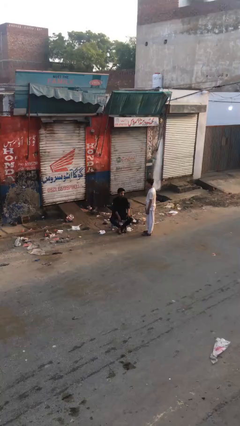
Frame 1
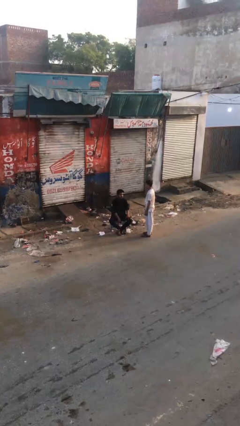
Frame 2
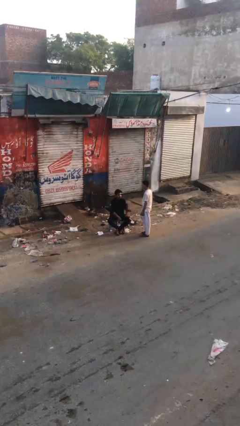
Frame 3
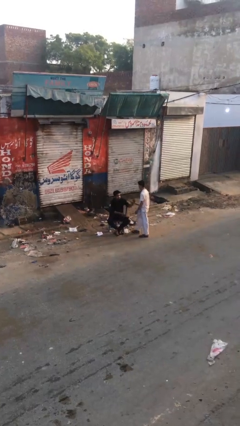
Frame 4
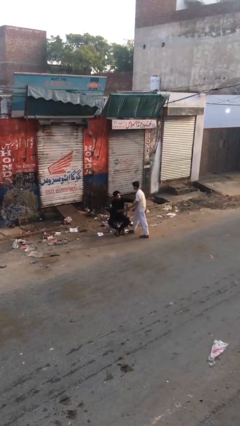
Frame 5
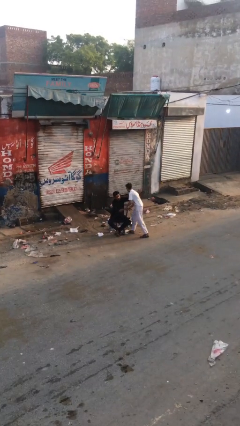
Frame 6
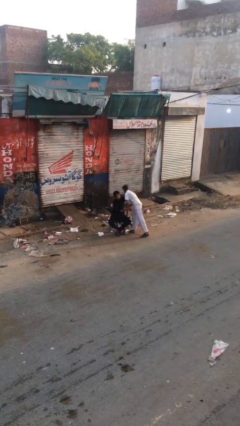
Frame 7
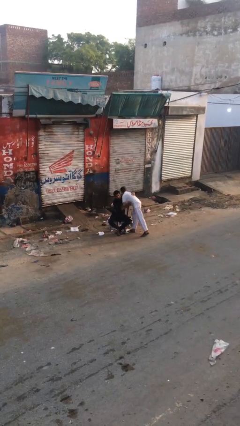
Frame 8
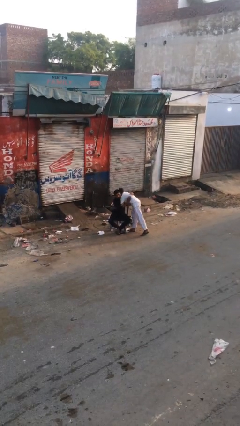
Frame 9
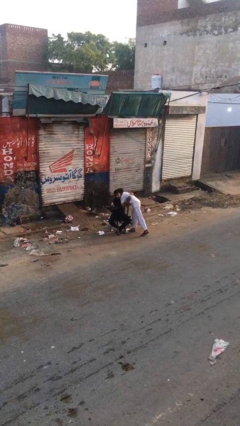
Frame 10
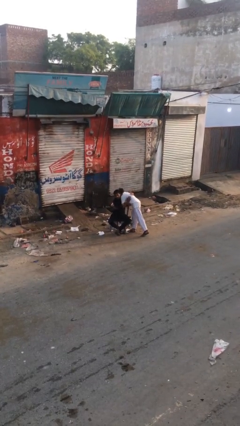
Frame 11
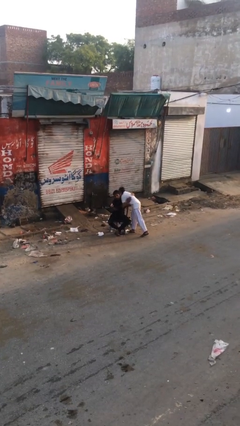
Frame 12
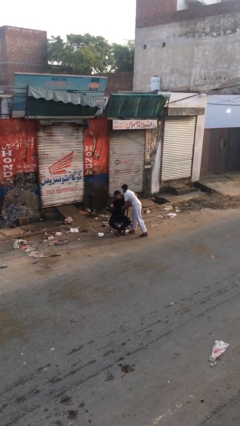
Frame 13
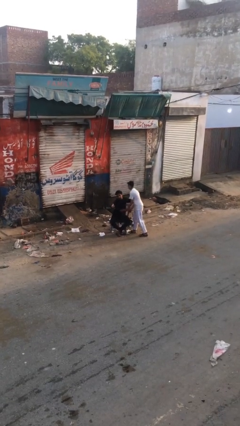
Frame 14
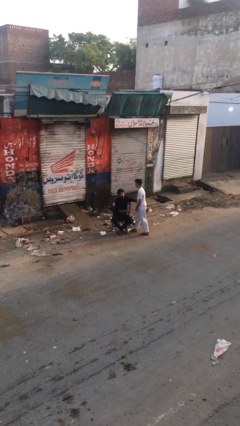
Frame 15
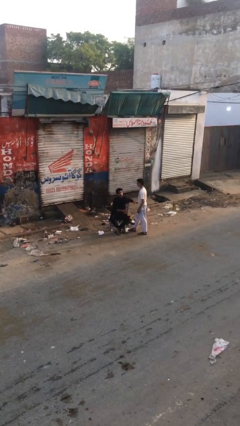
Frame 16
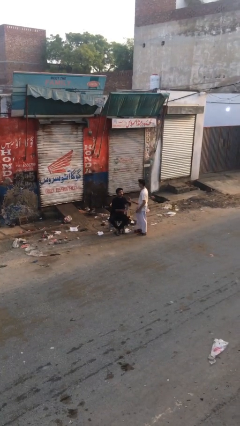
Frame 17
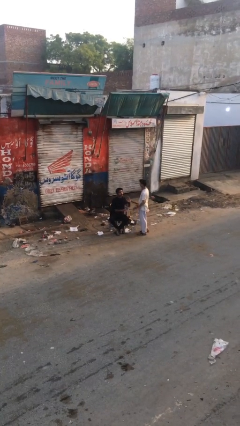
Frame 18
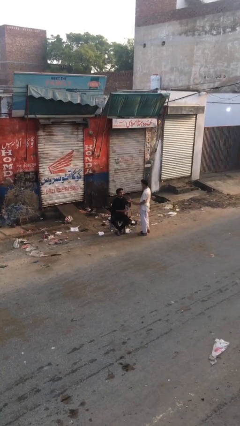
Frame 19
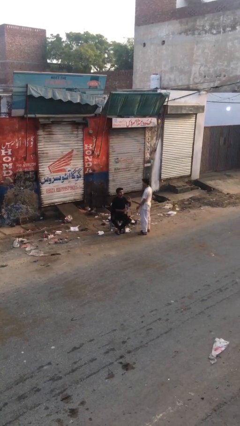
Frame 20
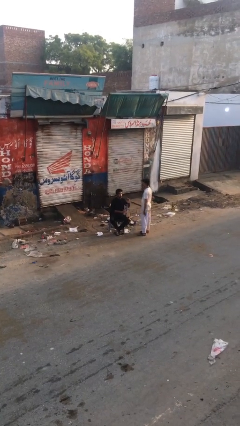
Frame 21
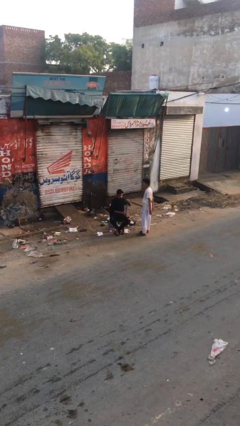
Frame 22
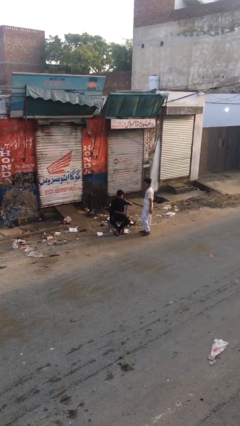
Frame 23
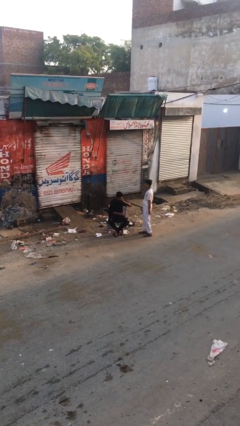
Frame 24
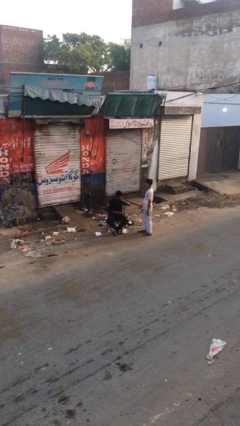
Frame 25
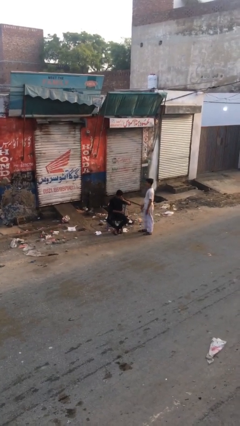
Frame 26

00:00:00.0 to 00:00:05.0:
person embraces person

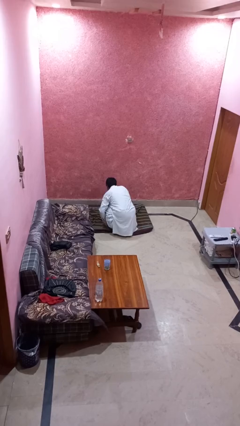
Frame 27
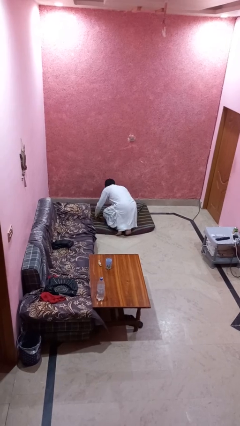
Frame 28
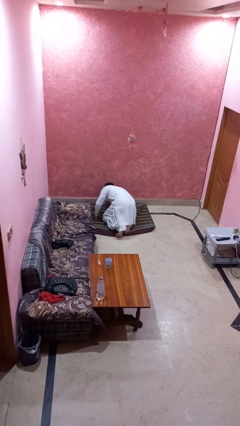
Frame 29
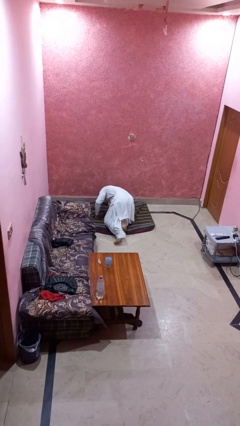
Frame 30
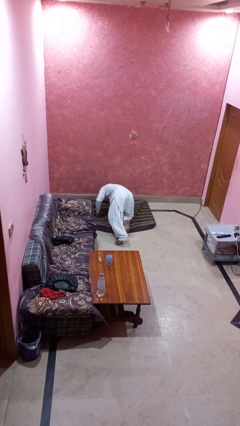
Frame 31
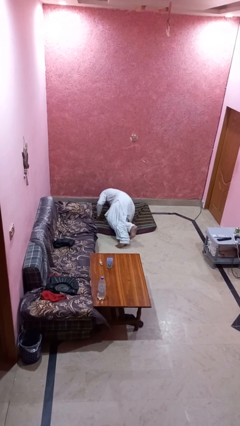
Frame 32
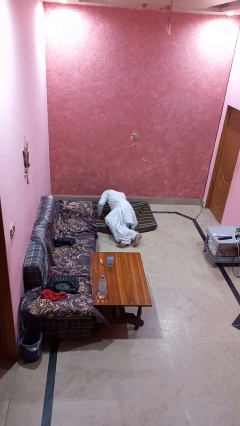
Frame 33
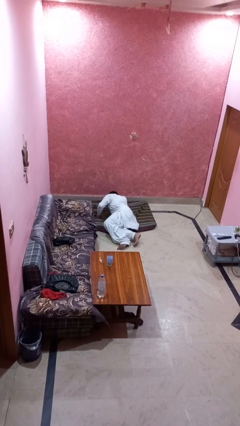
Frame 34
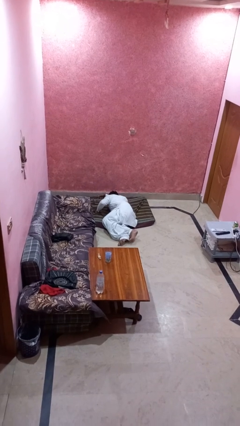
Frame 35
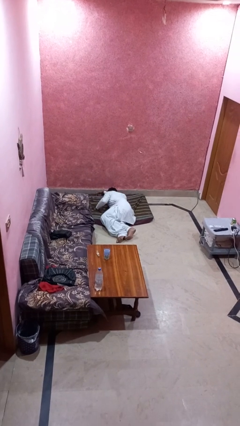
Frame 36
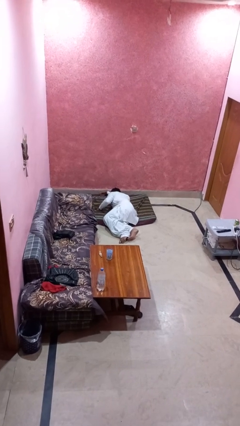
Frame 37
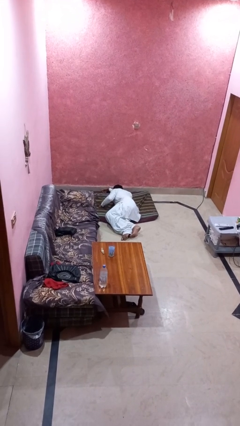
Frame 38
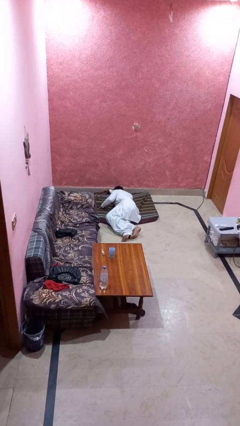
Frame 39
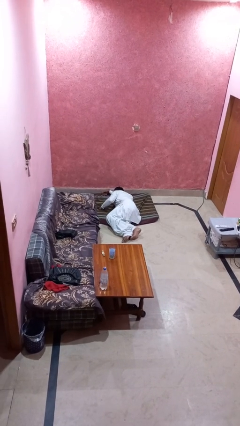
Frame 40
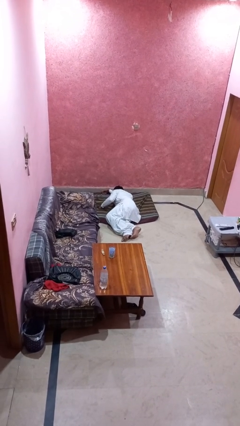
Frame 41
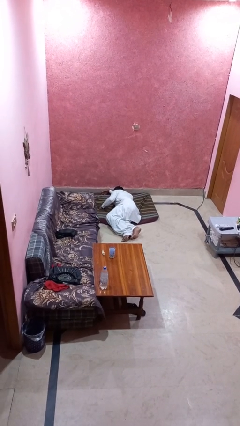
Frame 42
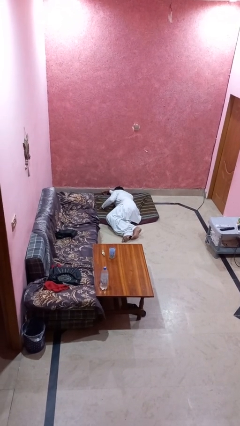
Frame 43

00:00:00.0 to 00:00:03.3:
person lies down on floor

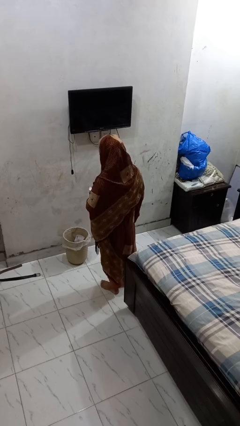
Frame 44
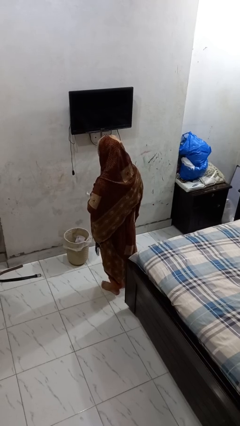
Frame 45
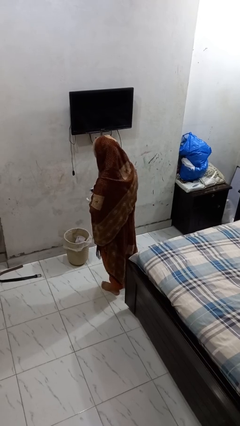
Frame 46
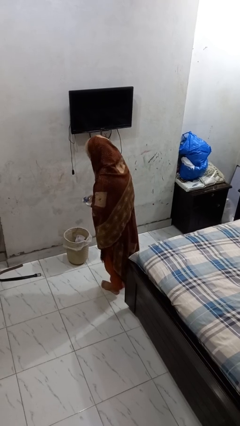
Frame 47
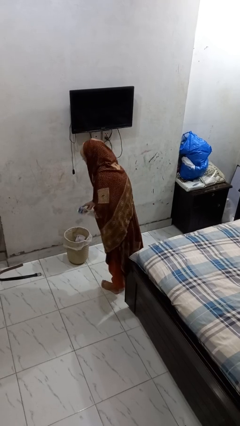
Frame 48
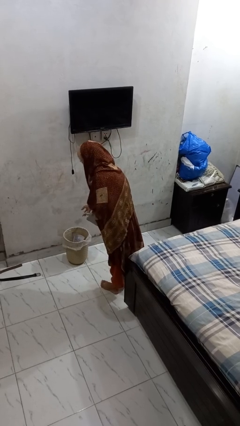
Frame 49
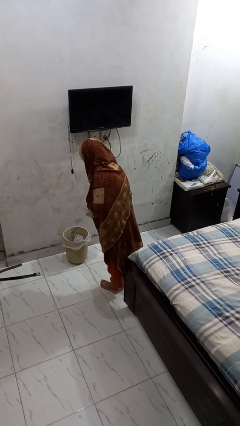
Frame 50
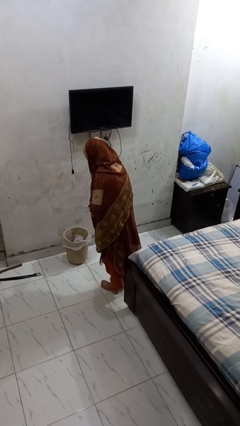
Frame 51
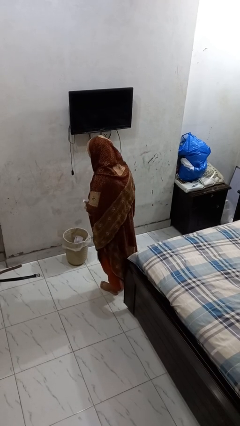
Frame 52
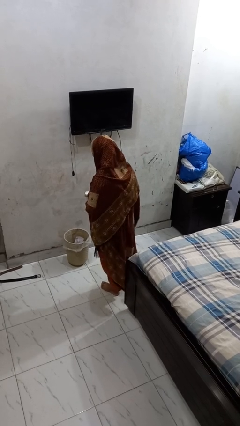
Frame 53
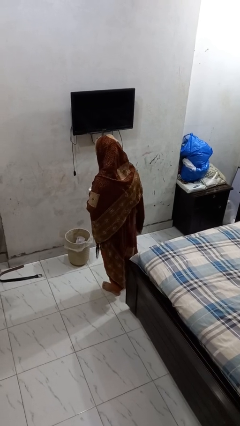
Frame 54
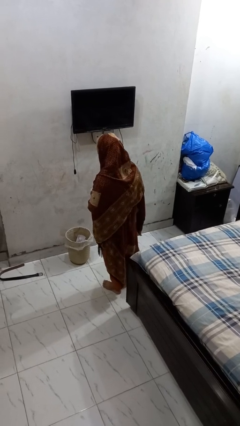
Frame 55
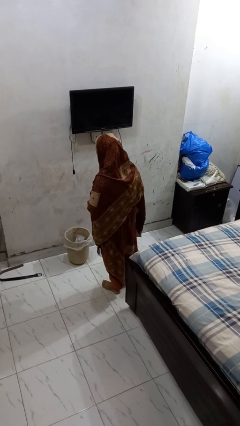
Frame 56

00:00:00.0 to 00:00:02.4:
person discards trash

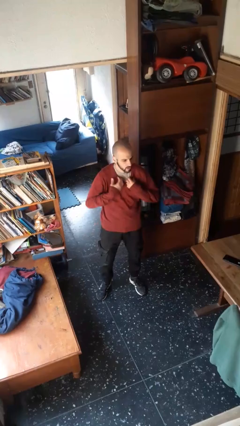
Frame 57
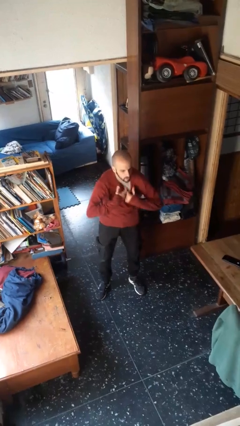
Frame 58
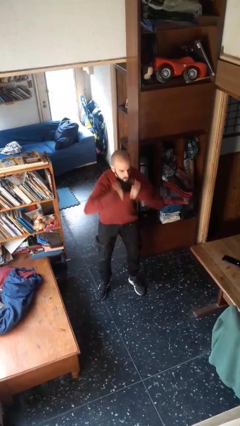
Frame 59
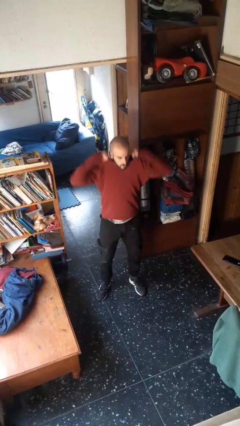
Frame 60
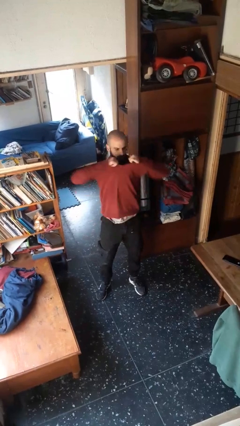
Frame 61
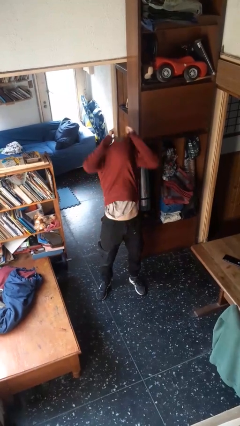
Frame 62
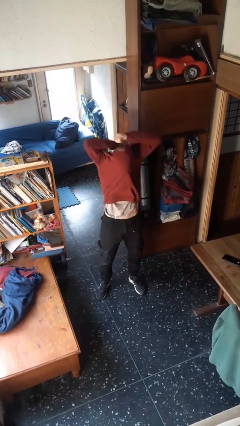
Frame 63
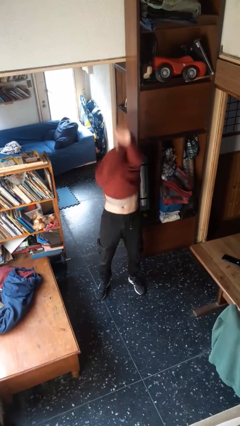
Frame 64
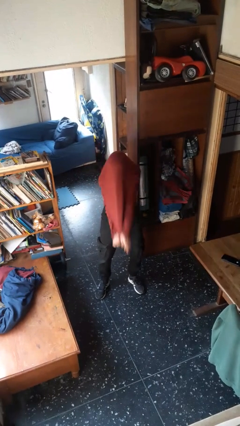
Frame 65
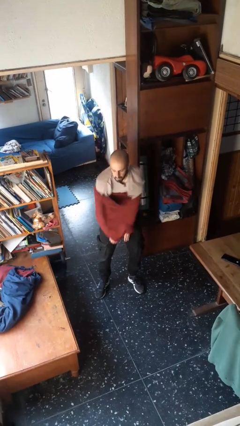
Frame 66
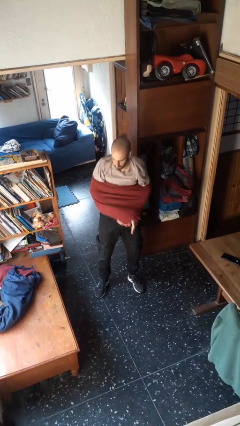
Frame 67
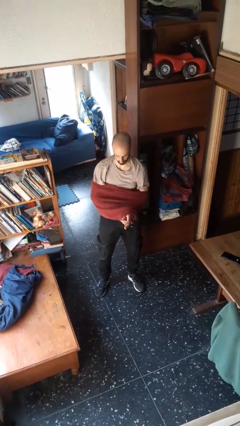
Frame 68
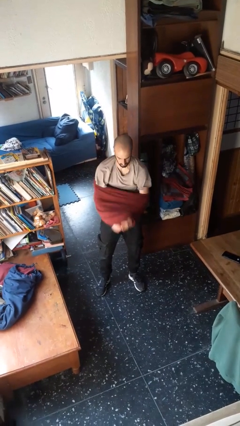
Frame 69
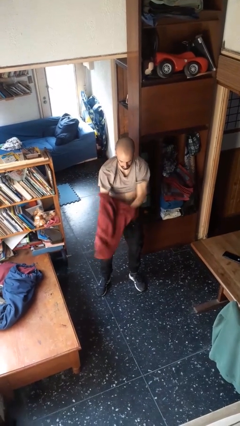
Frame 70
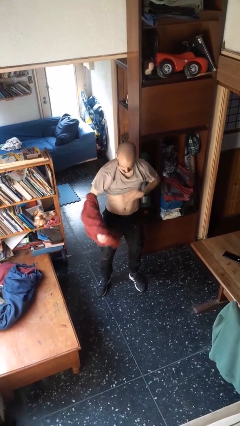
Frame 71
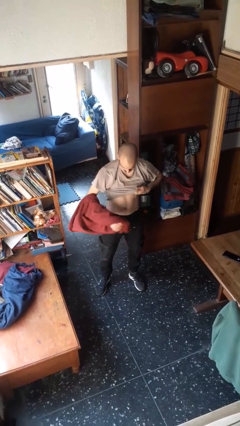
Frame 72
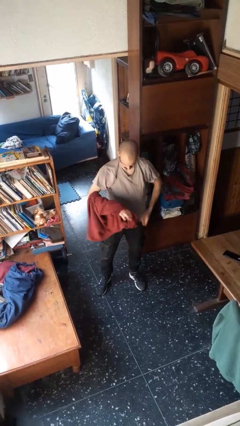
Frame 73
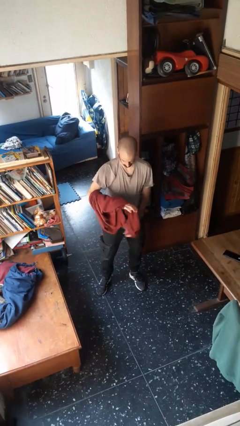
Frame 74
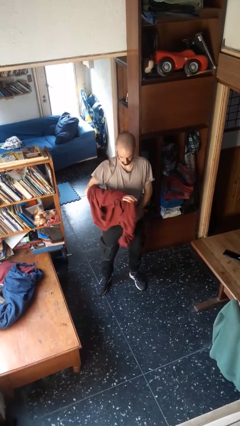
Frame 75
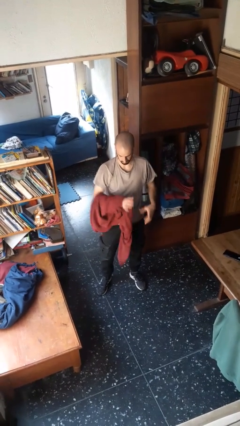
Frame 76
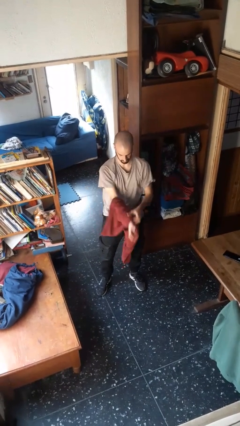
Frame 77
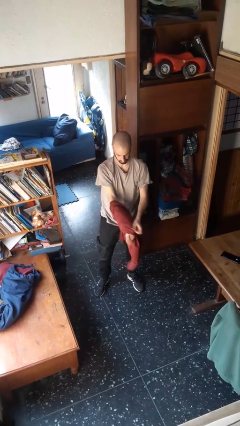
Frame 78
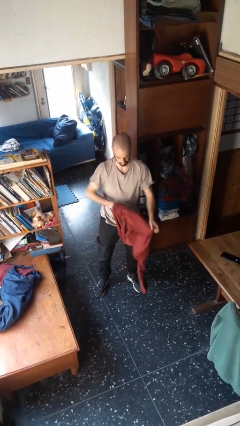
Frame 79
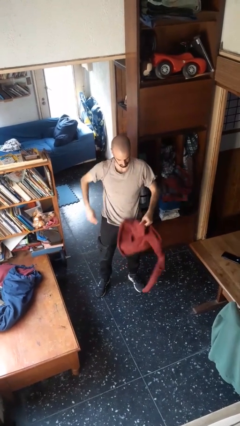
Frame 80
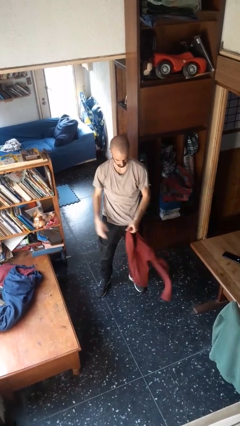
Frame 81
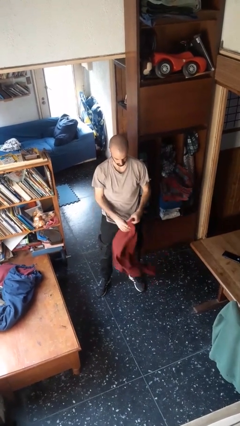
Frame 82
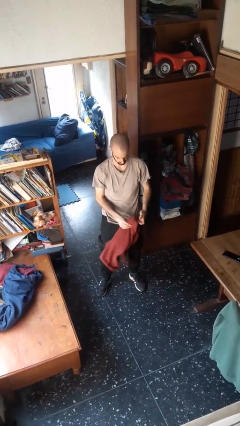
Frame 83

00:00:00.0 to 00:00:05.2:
person takes off shirt

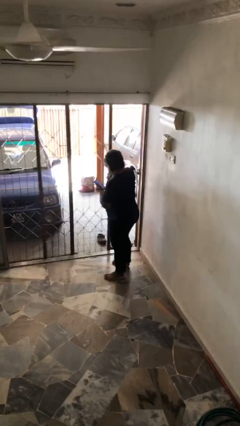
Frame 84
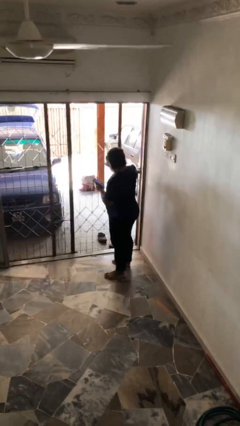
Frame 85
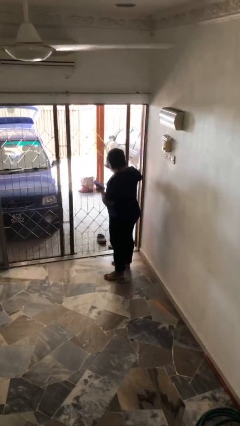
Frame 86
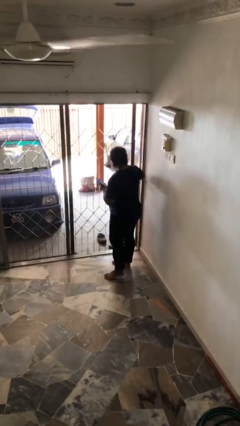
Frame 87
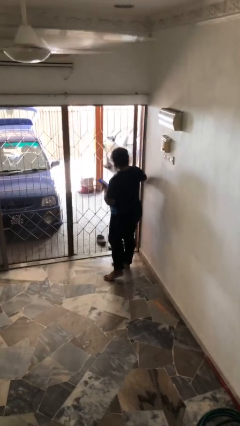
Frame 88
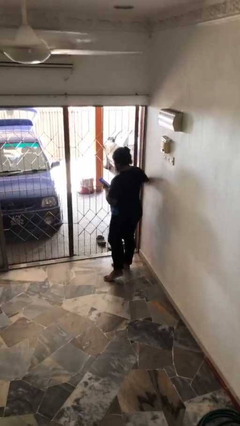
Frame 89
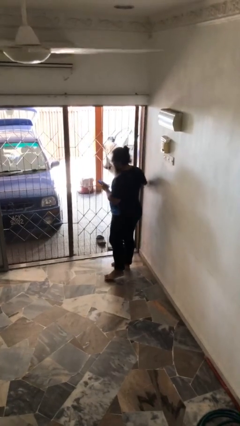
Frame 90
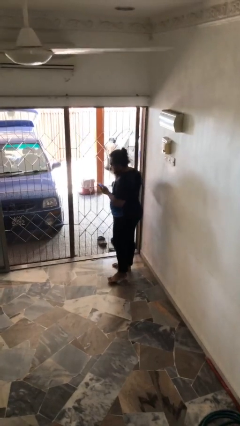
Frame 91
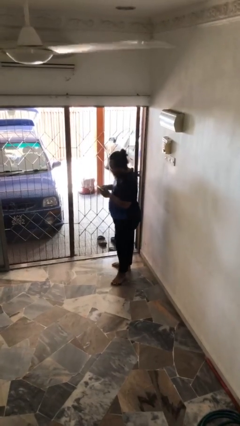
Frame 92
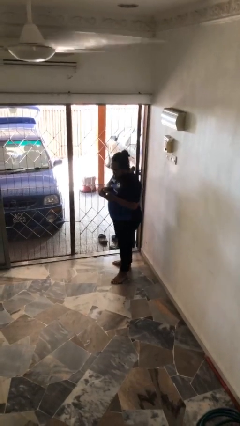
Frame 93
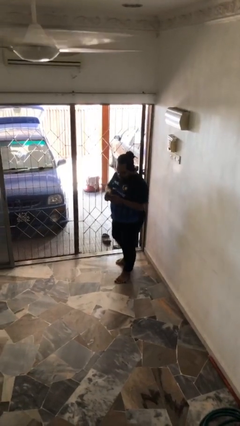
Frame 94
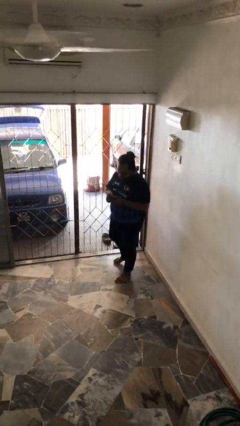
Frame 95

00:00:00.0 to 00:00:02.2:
person closes facility door
